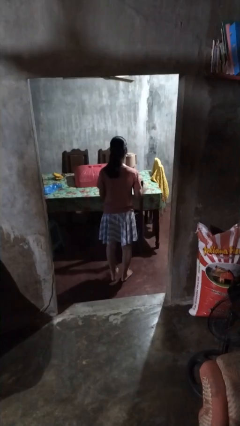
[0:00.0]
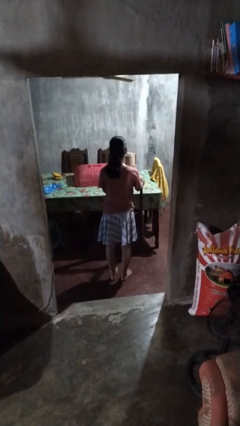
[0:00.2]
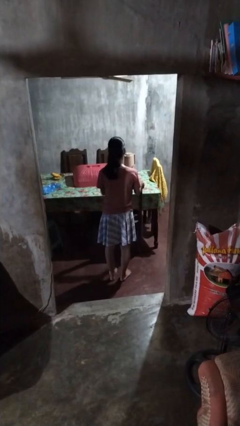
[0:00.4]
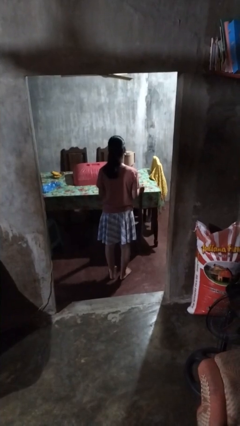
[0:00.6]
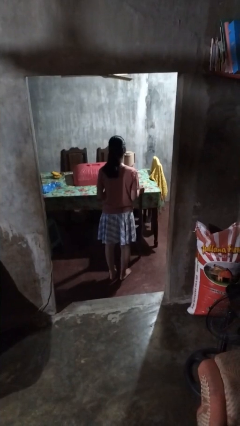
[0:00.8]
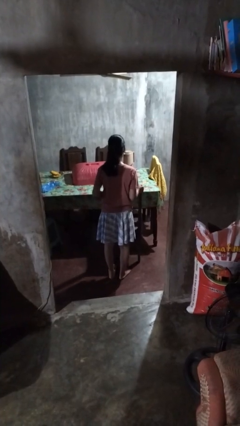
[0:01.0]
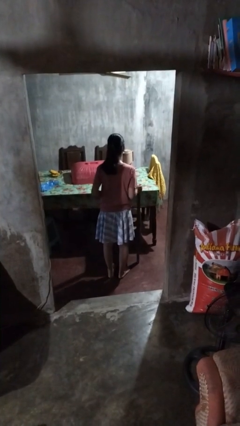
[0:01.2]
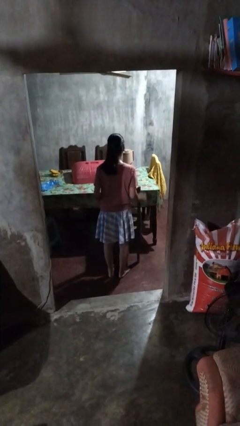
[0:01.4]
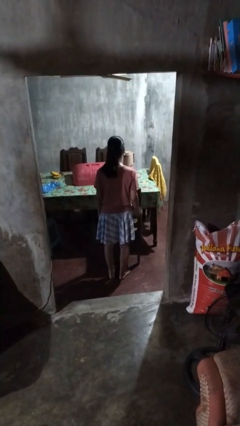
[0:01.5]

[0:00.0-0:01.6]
person pulls out chair

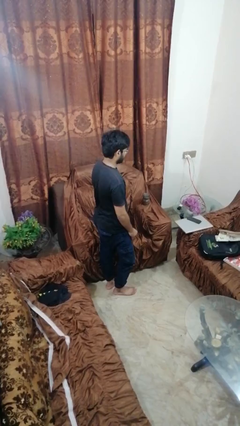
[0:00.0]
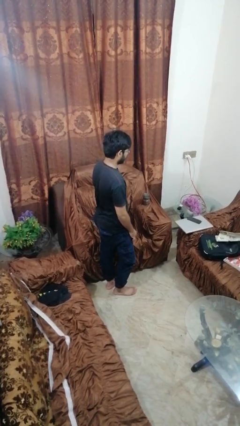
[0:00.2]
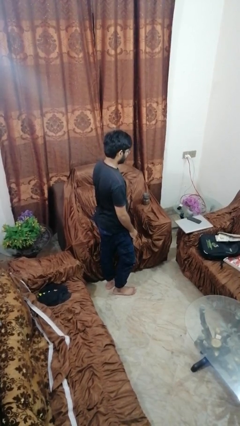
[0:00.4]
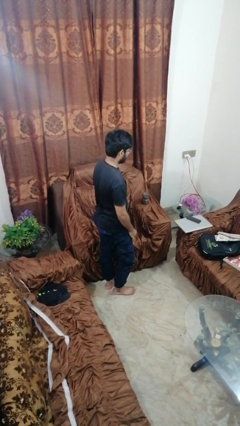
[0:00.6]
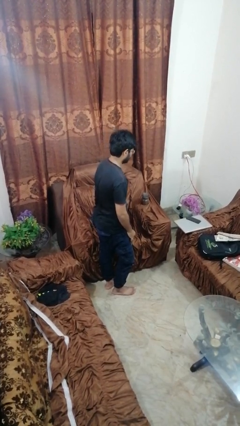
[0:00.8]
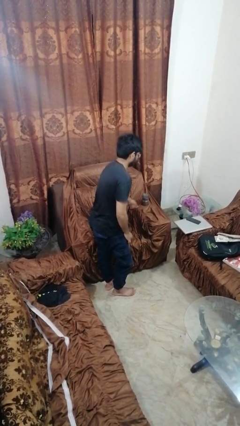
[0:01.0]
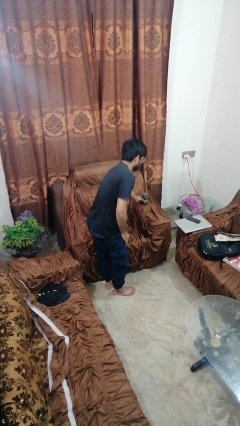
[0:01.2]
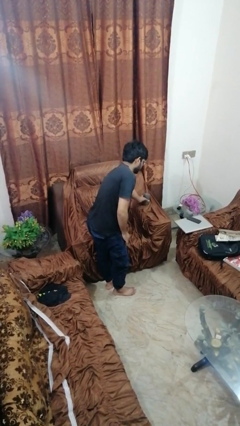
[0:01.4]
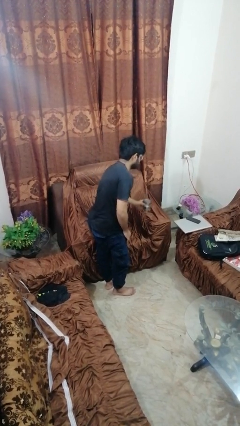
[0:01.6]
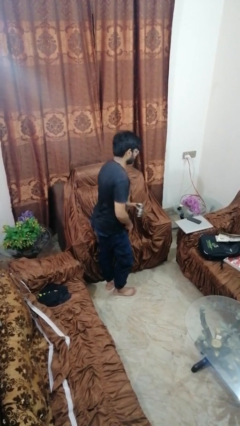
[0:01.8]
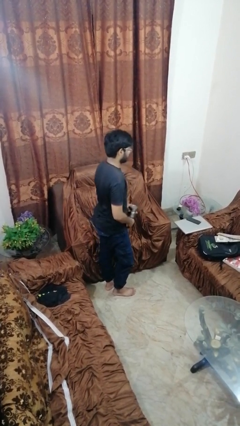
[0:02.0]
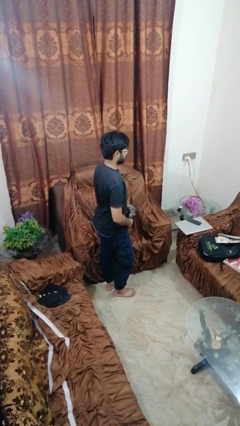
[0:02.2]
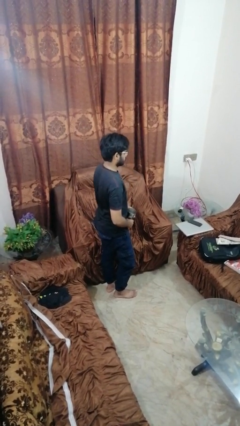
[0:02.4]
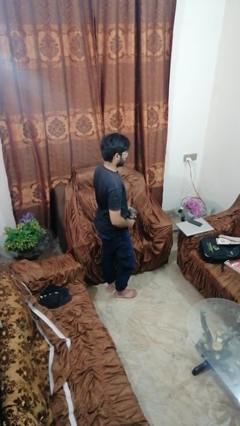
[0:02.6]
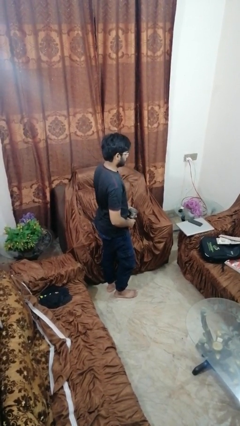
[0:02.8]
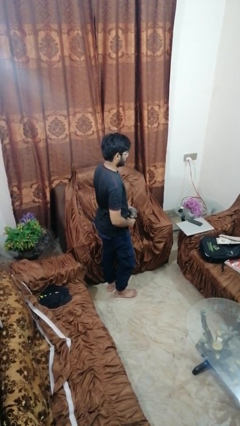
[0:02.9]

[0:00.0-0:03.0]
person picks up object from couch

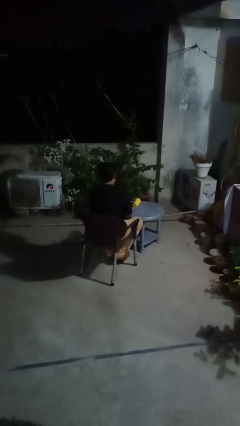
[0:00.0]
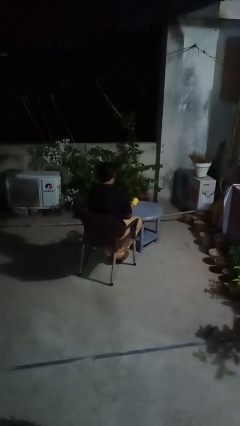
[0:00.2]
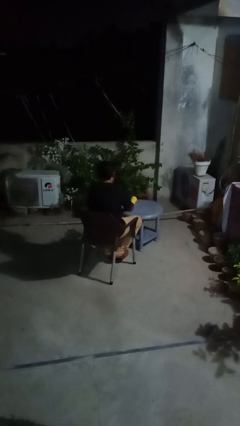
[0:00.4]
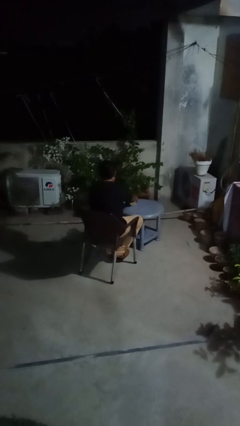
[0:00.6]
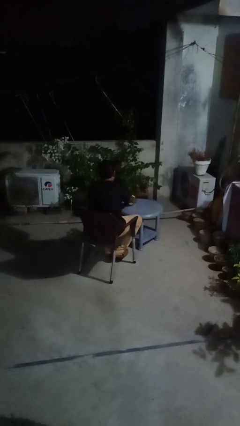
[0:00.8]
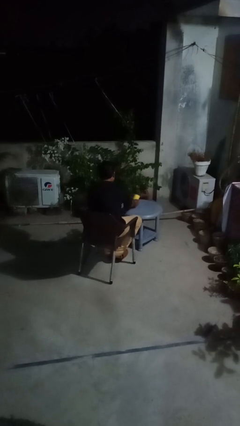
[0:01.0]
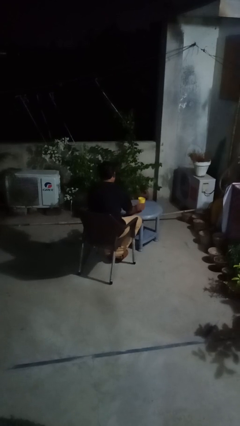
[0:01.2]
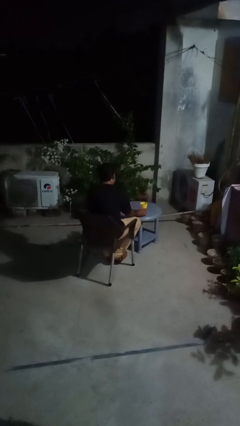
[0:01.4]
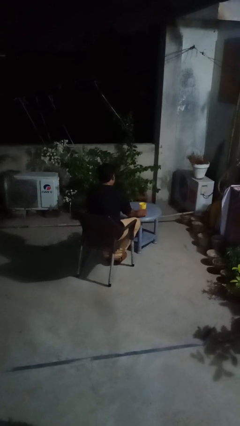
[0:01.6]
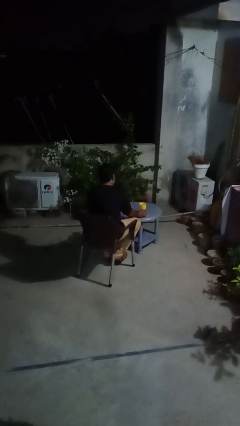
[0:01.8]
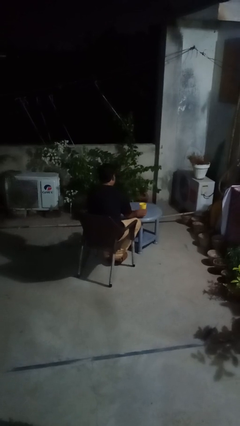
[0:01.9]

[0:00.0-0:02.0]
person sets upright glass

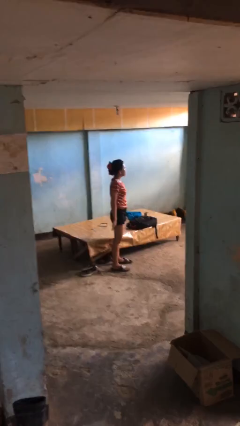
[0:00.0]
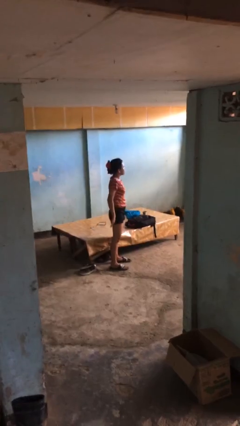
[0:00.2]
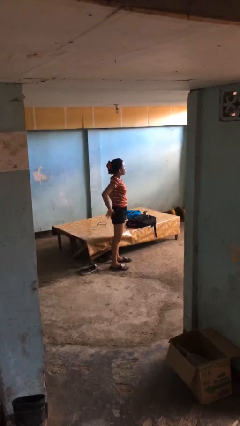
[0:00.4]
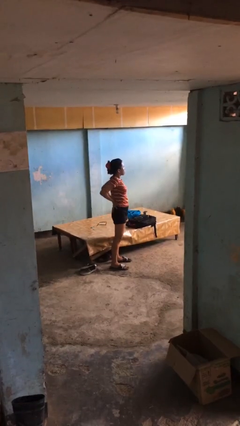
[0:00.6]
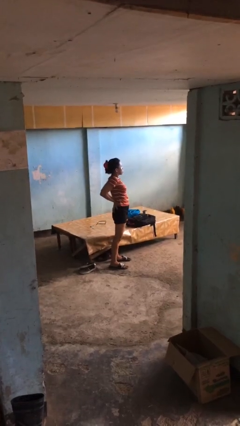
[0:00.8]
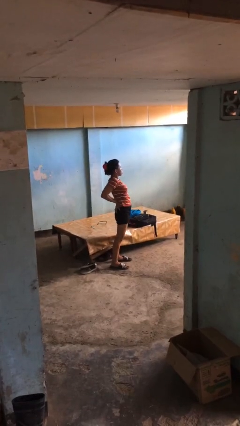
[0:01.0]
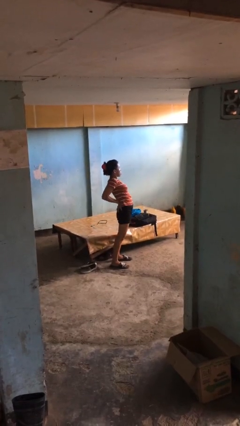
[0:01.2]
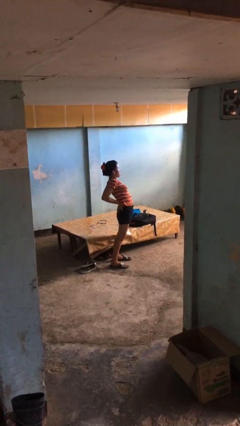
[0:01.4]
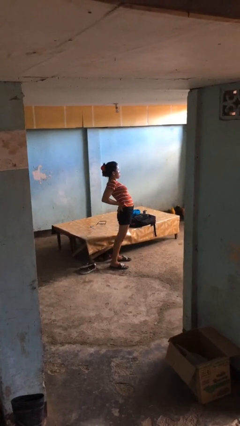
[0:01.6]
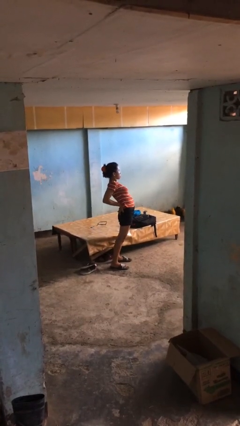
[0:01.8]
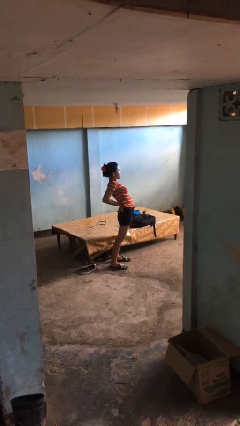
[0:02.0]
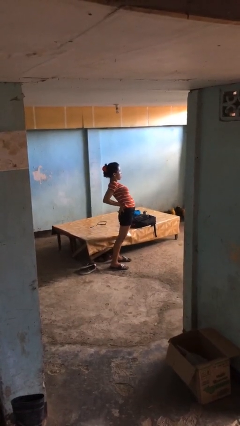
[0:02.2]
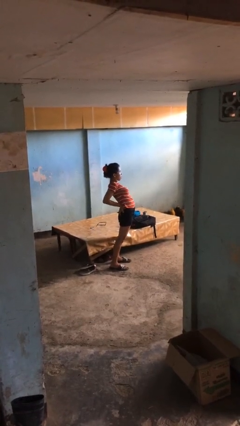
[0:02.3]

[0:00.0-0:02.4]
person stretches back

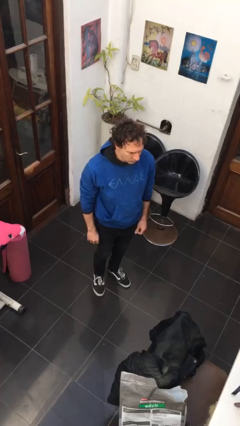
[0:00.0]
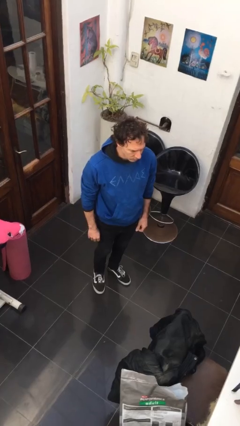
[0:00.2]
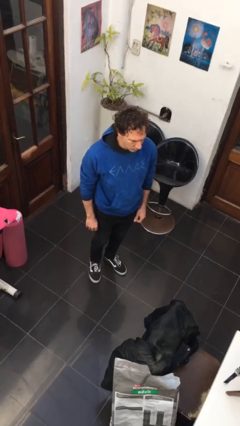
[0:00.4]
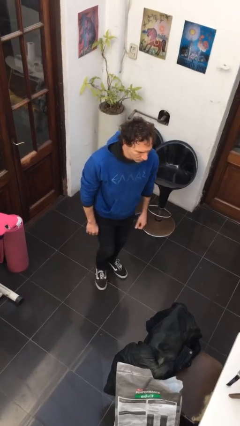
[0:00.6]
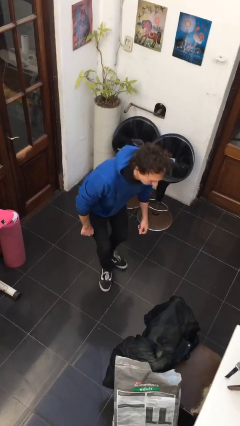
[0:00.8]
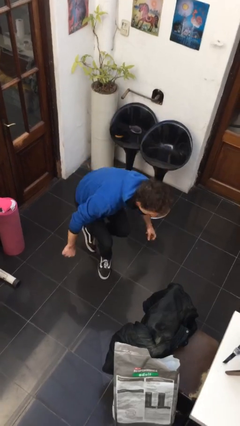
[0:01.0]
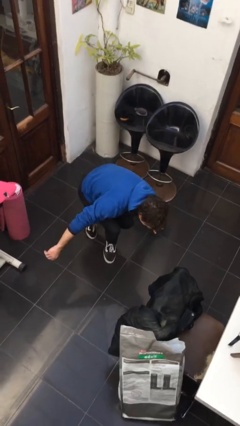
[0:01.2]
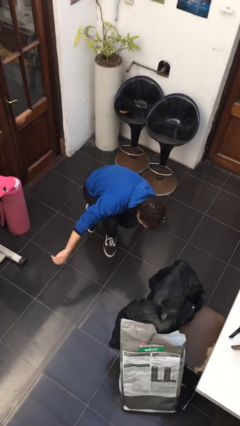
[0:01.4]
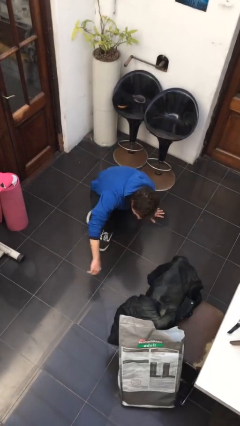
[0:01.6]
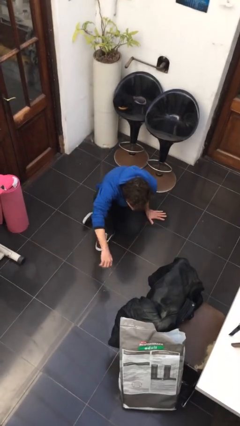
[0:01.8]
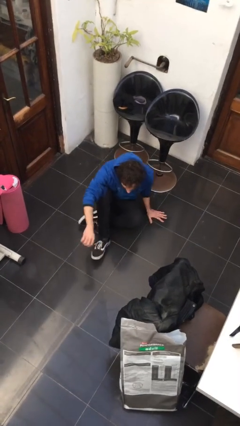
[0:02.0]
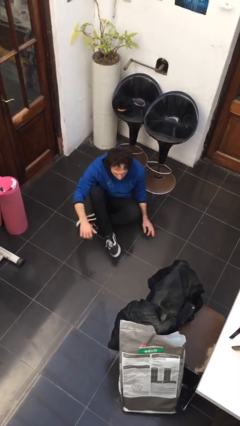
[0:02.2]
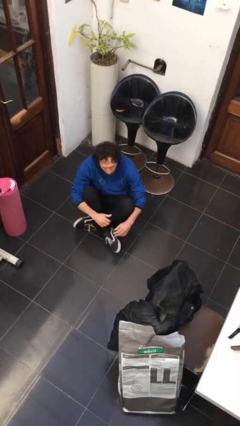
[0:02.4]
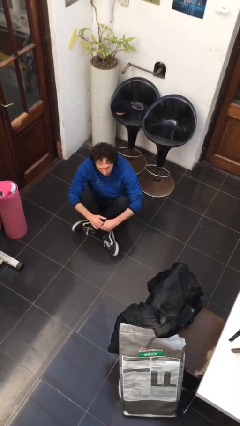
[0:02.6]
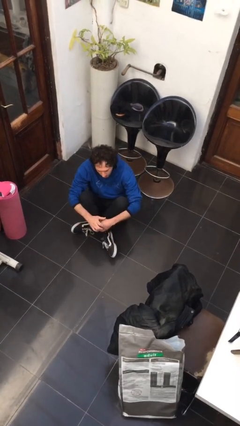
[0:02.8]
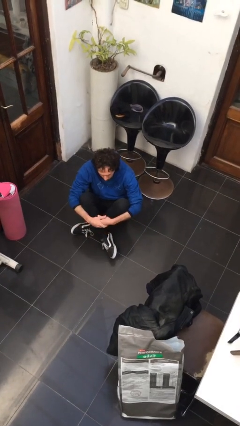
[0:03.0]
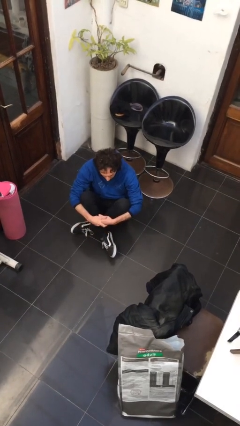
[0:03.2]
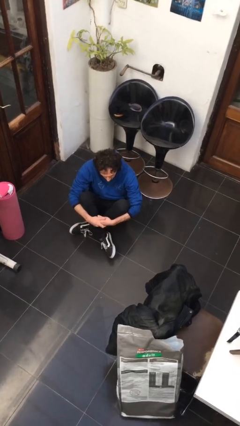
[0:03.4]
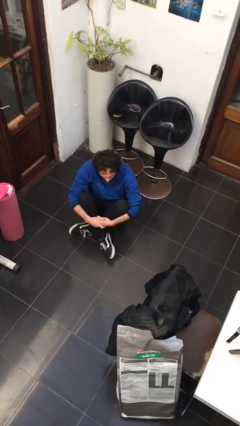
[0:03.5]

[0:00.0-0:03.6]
person sits crisscross

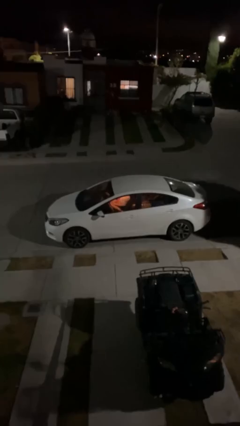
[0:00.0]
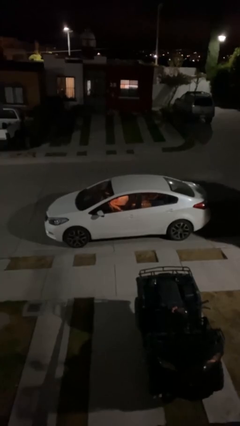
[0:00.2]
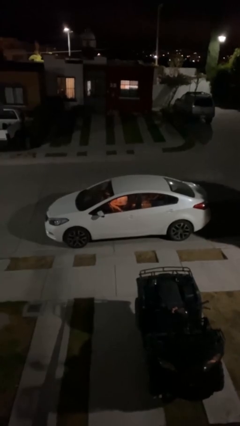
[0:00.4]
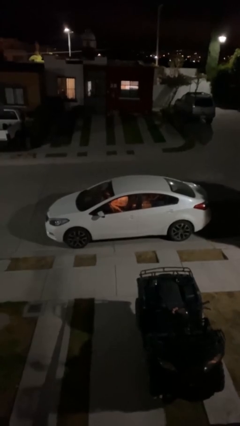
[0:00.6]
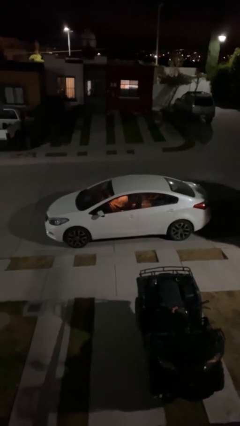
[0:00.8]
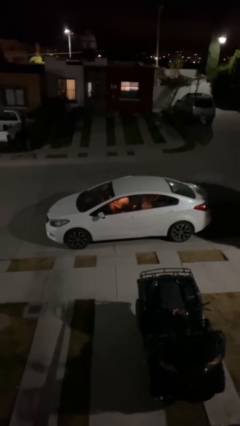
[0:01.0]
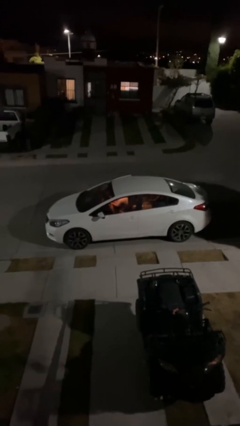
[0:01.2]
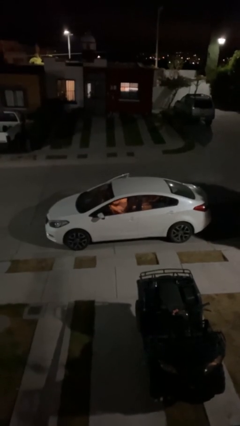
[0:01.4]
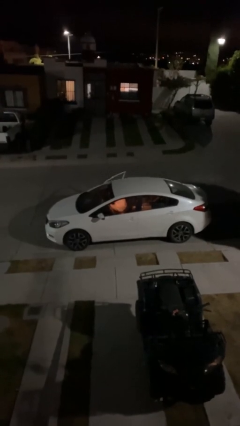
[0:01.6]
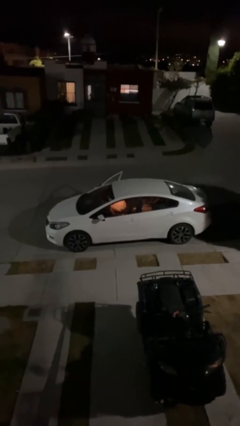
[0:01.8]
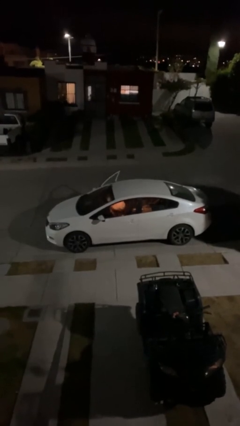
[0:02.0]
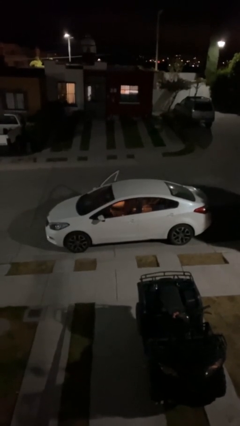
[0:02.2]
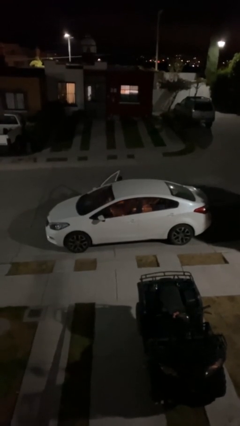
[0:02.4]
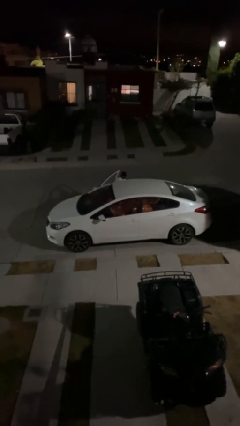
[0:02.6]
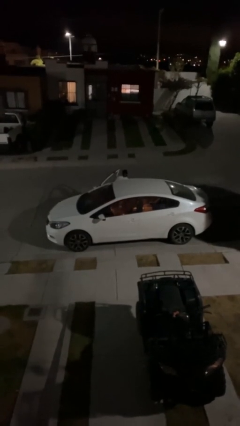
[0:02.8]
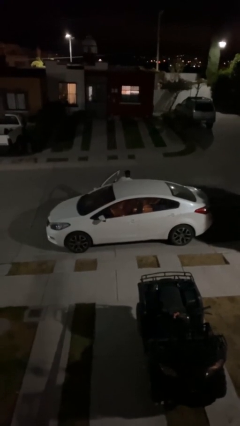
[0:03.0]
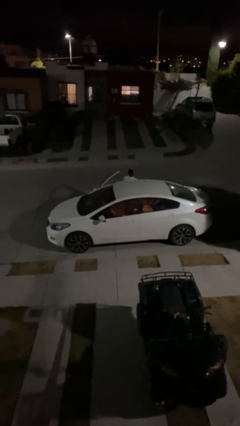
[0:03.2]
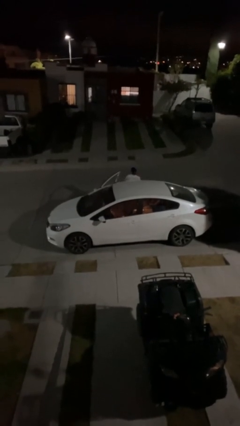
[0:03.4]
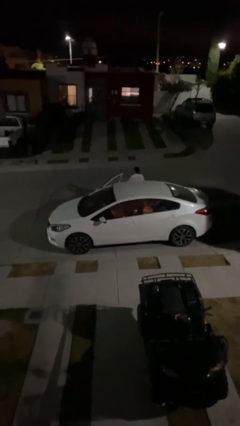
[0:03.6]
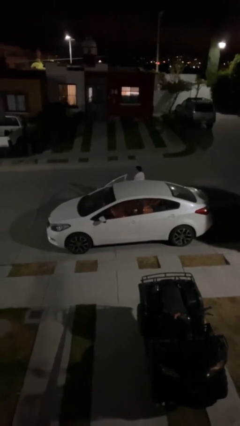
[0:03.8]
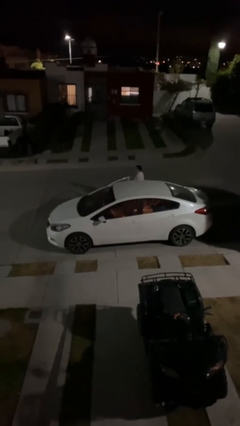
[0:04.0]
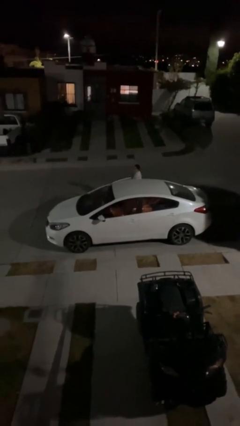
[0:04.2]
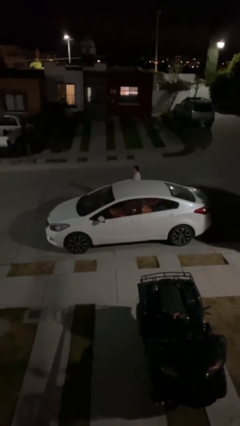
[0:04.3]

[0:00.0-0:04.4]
car drops off person

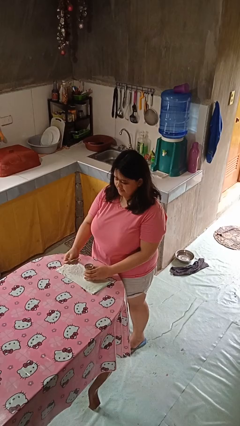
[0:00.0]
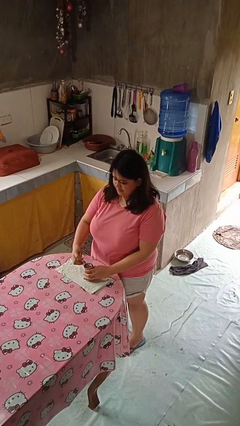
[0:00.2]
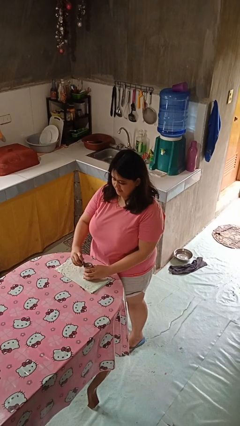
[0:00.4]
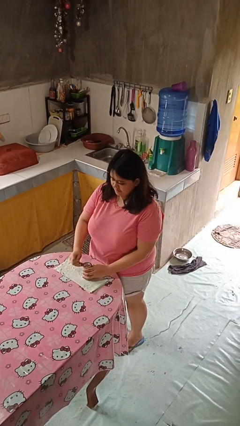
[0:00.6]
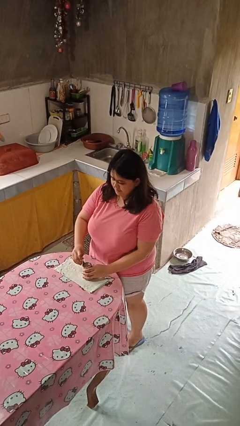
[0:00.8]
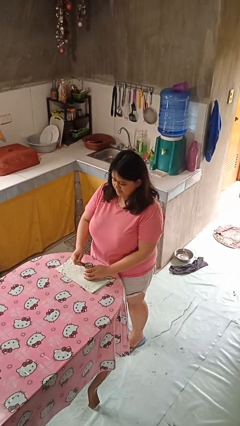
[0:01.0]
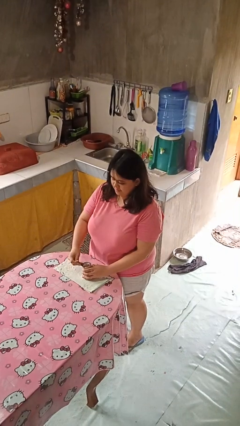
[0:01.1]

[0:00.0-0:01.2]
person opens can with can opener
